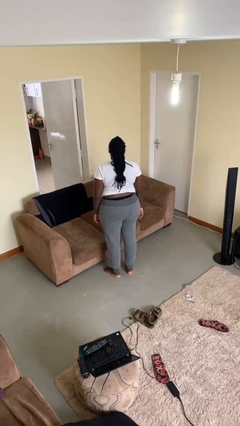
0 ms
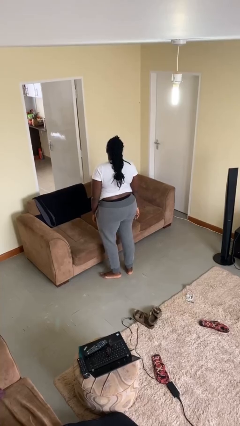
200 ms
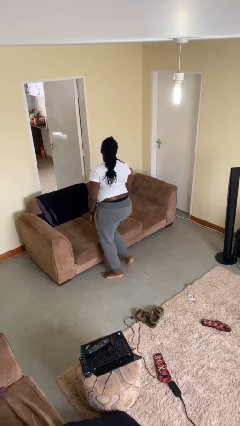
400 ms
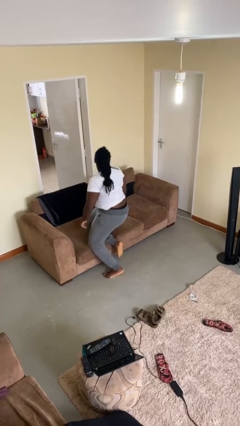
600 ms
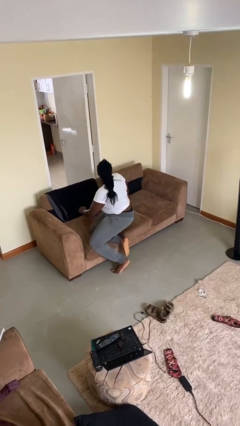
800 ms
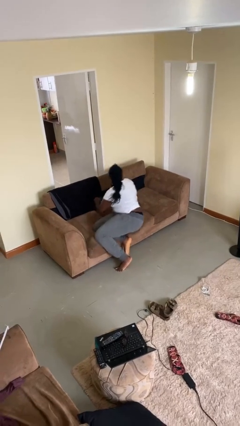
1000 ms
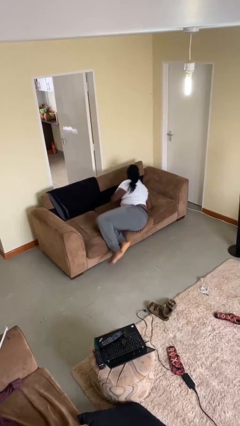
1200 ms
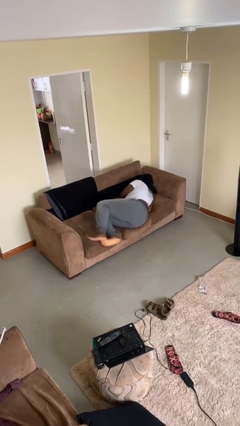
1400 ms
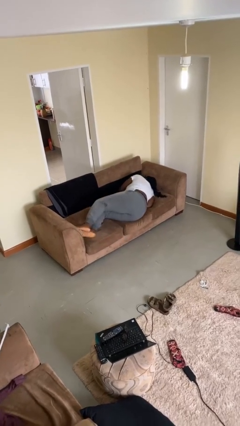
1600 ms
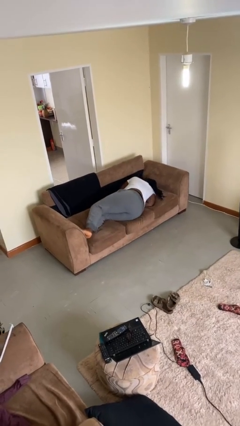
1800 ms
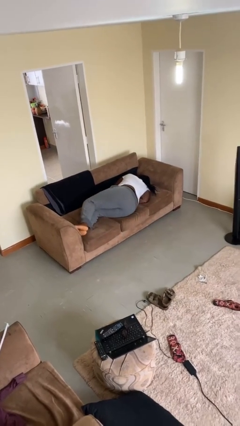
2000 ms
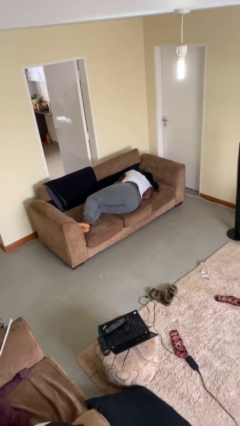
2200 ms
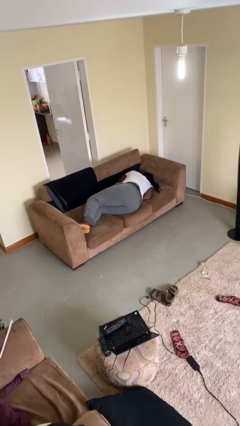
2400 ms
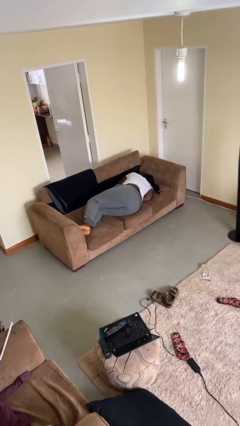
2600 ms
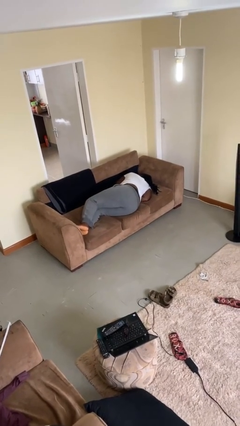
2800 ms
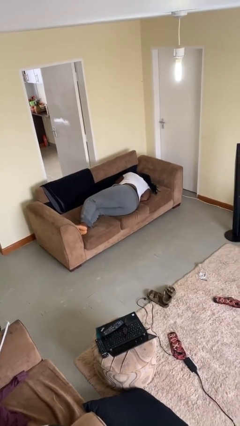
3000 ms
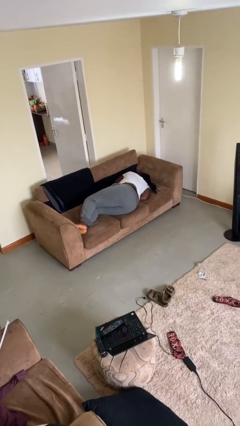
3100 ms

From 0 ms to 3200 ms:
person lies down on couch

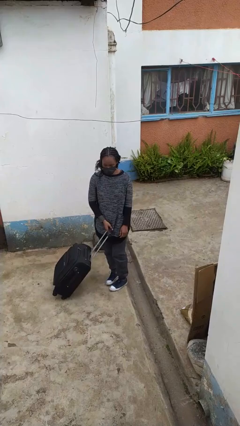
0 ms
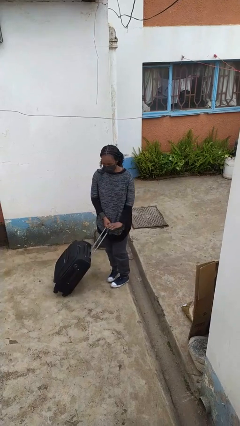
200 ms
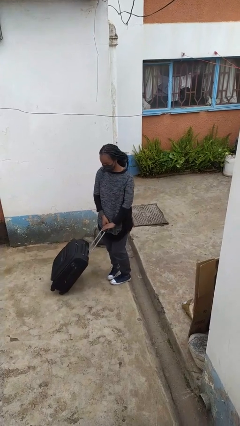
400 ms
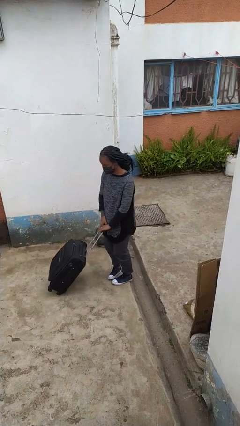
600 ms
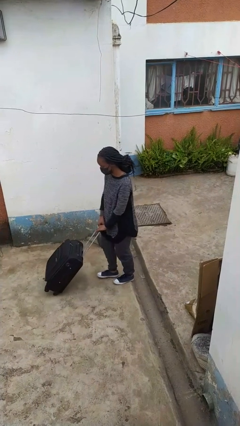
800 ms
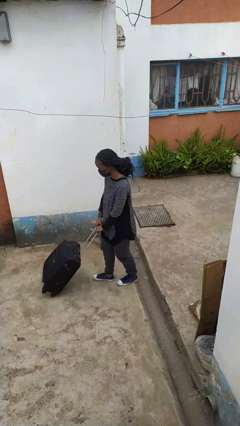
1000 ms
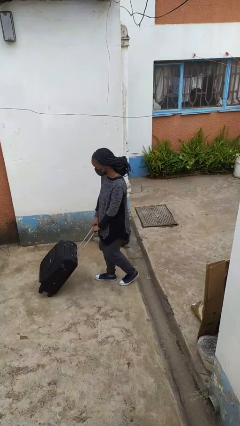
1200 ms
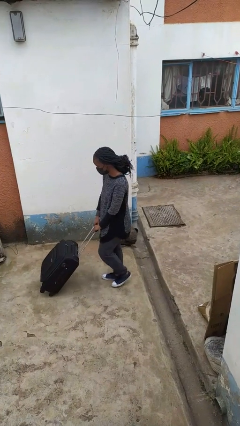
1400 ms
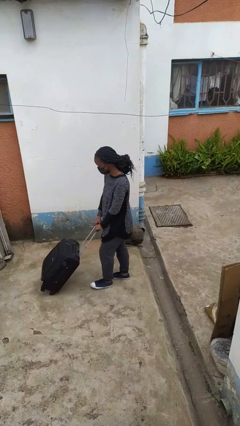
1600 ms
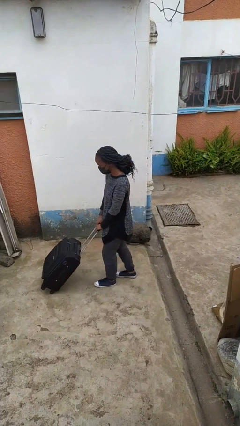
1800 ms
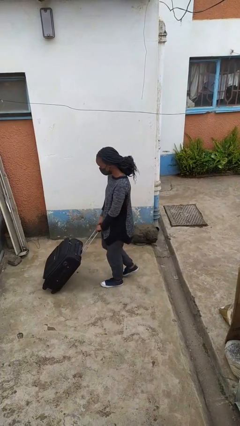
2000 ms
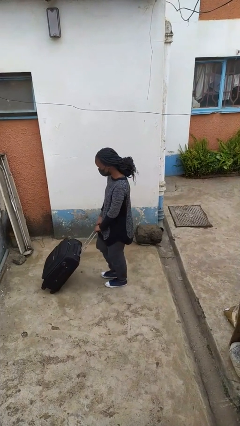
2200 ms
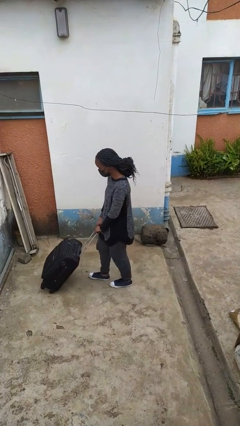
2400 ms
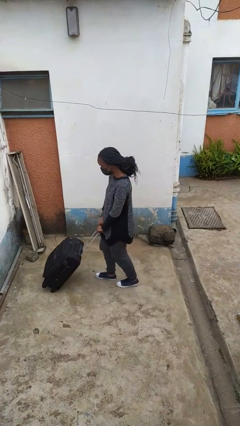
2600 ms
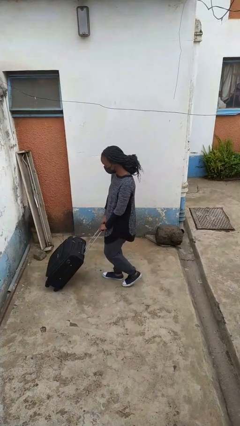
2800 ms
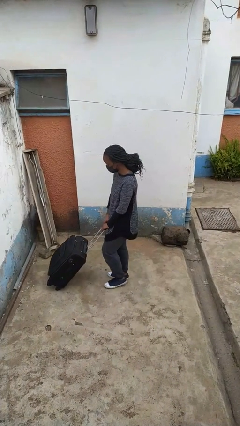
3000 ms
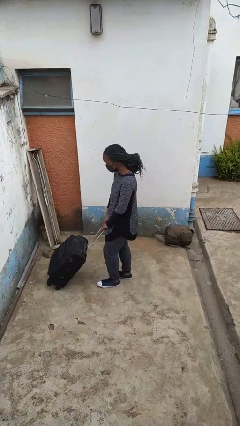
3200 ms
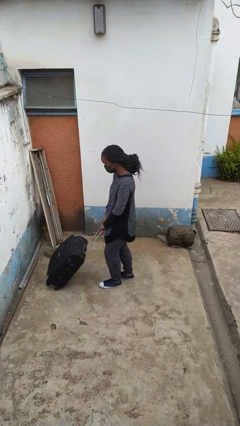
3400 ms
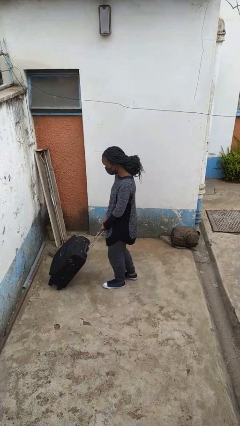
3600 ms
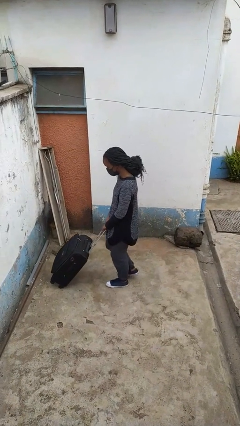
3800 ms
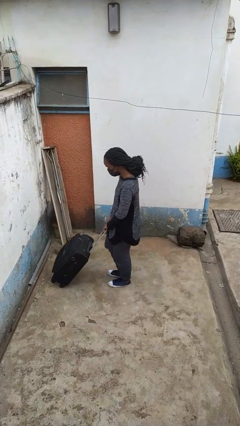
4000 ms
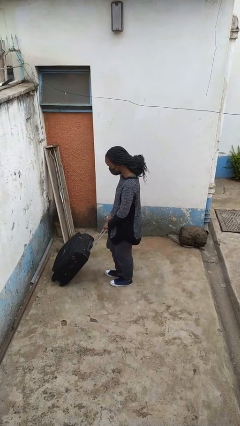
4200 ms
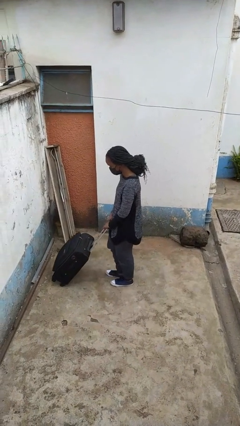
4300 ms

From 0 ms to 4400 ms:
person pushes wheeled cart

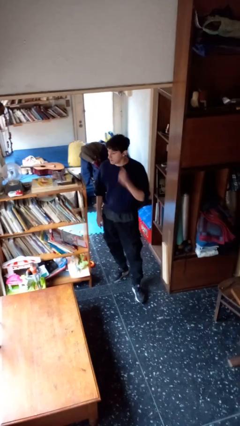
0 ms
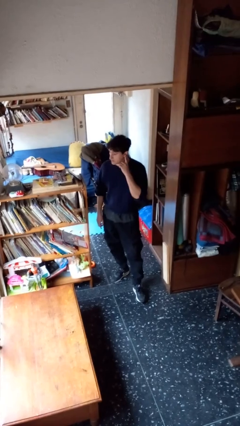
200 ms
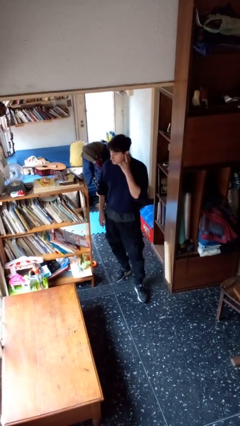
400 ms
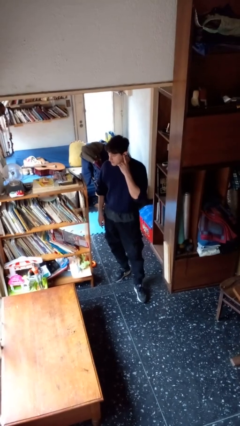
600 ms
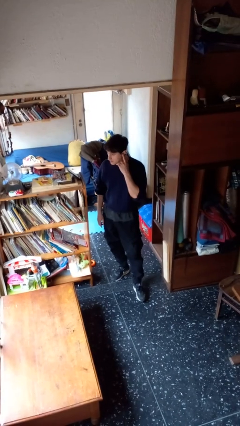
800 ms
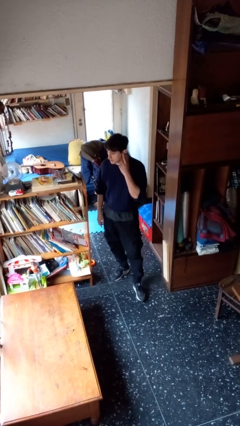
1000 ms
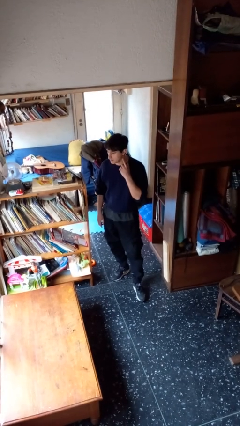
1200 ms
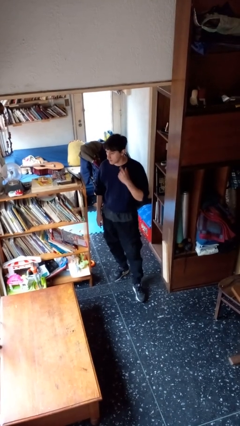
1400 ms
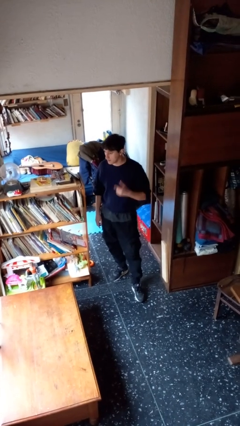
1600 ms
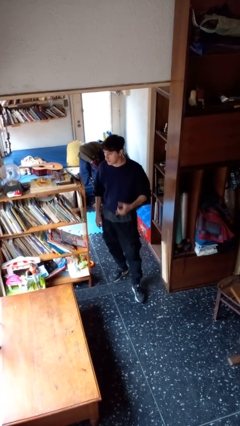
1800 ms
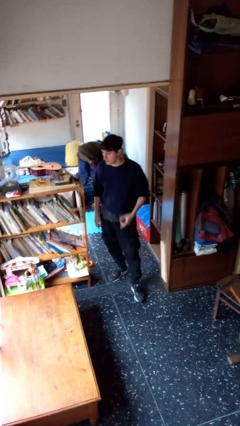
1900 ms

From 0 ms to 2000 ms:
person gestures listen closely

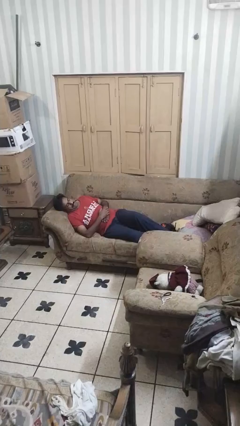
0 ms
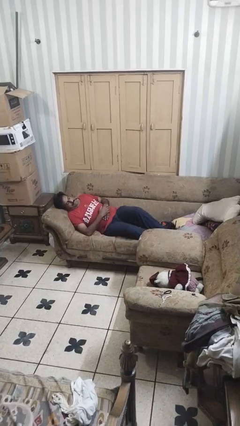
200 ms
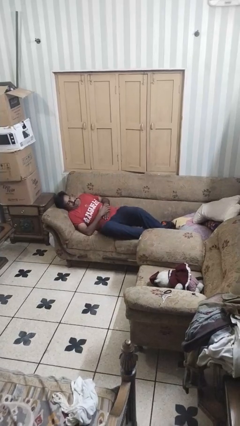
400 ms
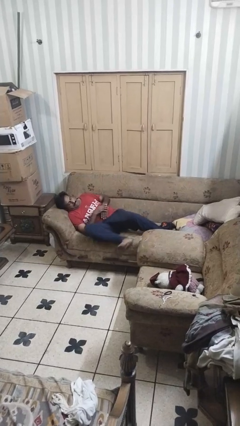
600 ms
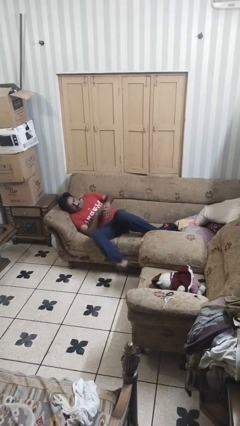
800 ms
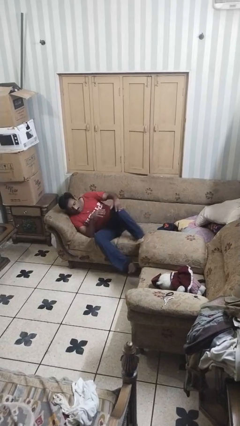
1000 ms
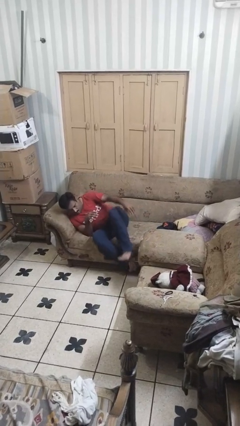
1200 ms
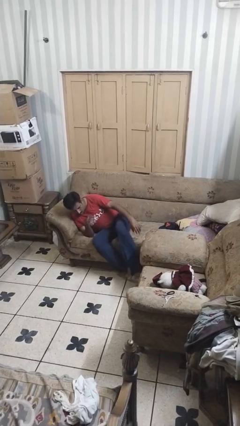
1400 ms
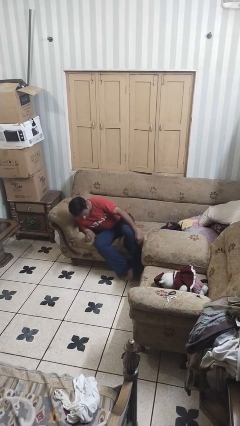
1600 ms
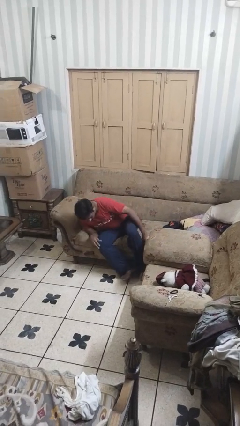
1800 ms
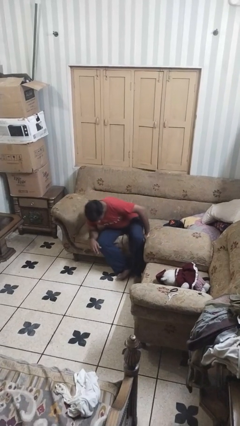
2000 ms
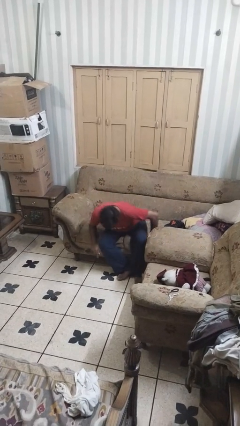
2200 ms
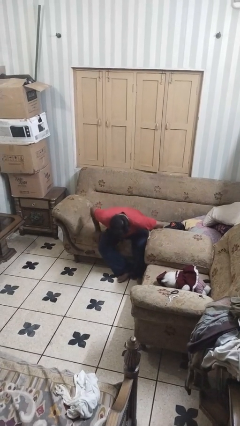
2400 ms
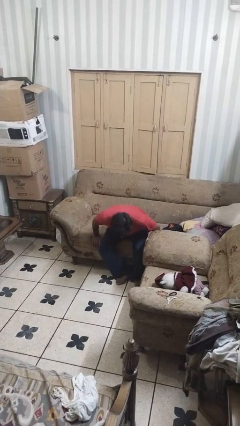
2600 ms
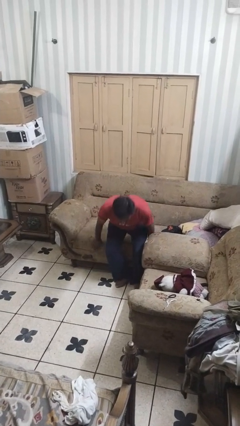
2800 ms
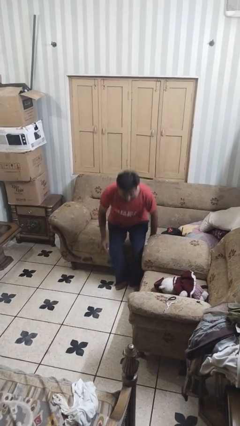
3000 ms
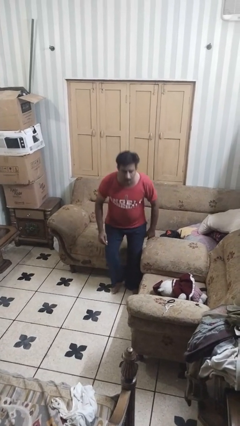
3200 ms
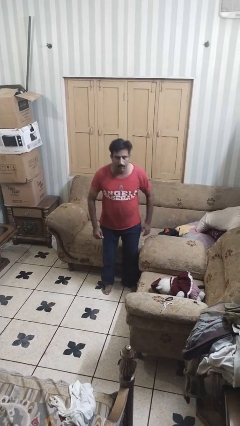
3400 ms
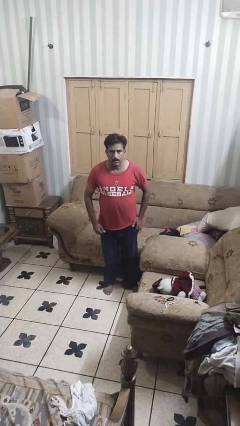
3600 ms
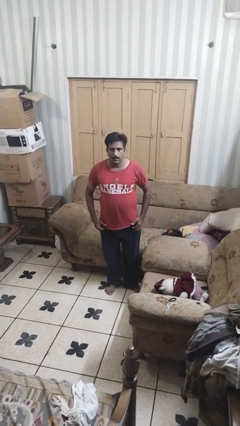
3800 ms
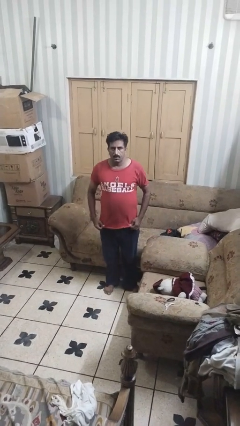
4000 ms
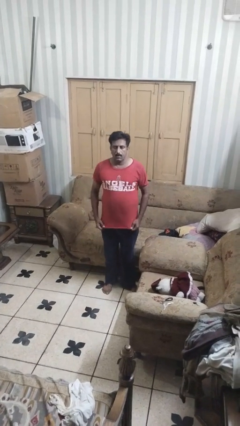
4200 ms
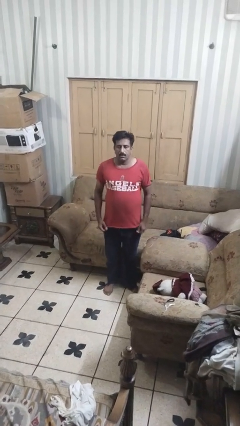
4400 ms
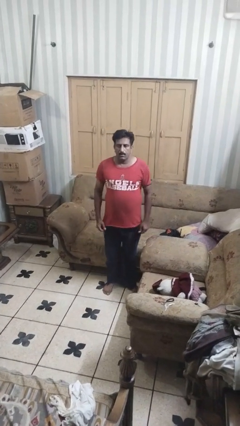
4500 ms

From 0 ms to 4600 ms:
person stands up

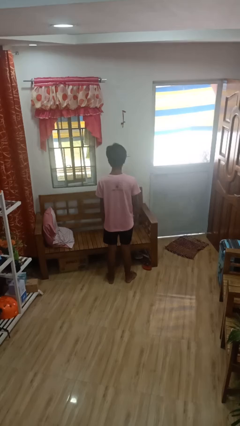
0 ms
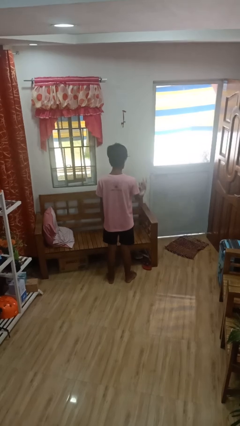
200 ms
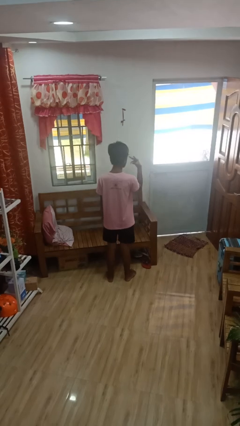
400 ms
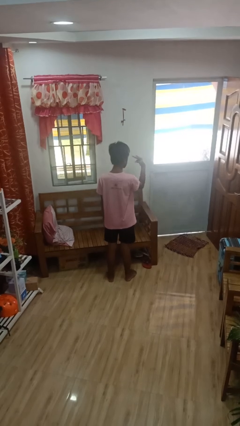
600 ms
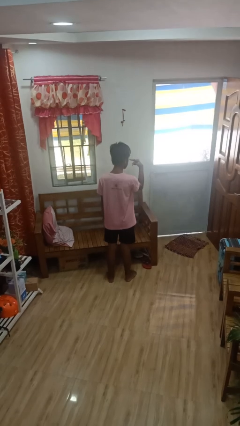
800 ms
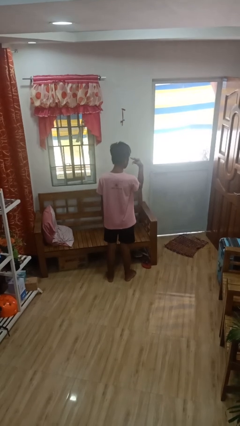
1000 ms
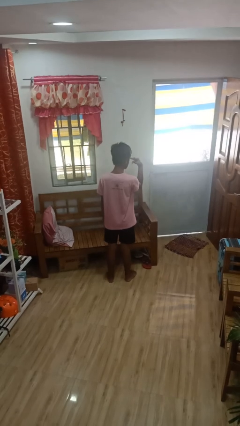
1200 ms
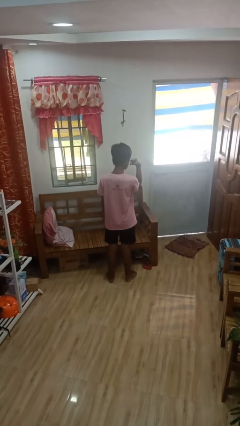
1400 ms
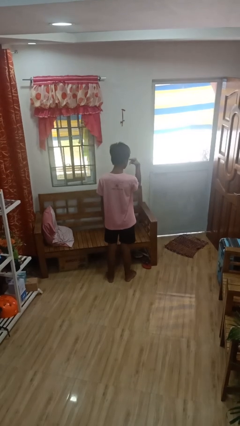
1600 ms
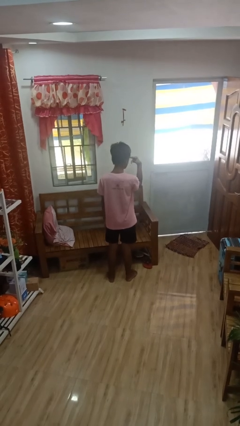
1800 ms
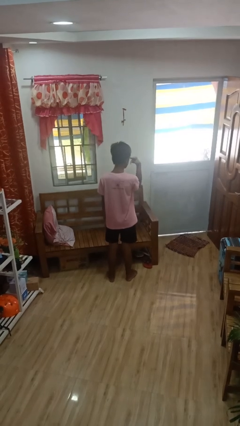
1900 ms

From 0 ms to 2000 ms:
person gestures watch closely

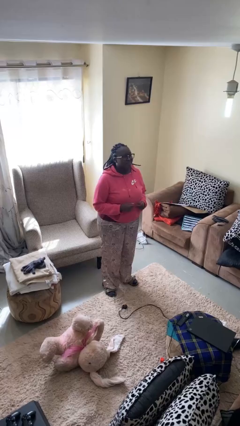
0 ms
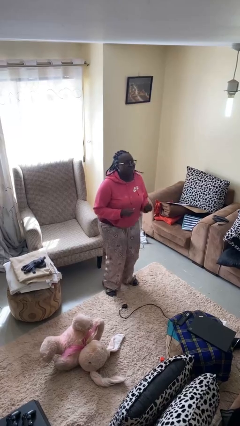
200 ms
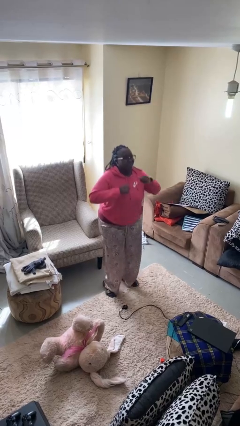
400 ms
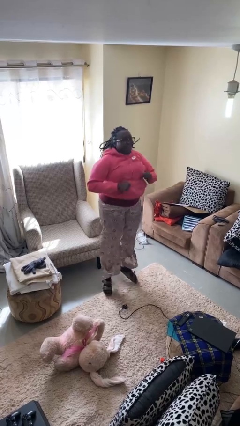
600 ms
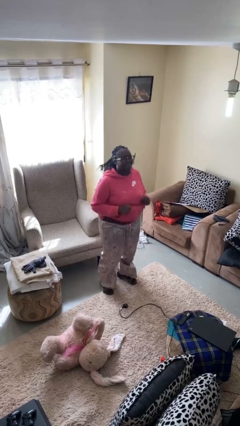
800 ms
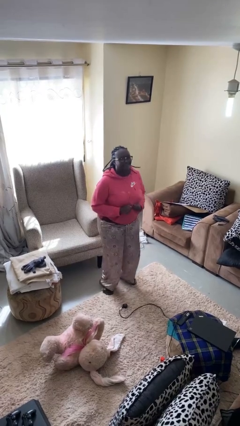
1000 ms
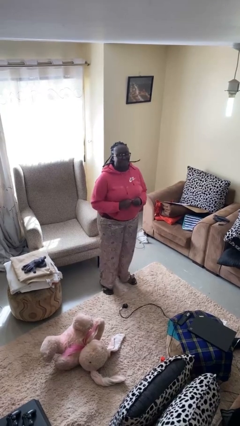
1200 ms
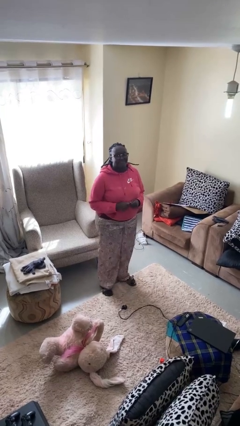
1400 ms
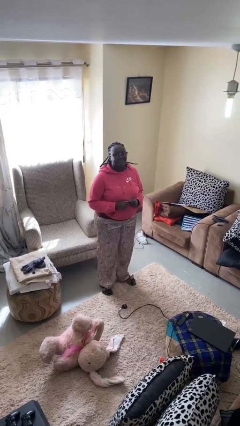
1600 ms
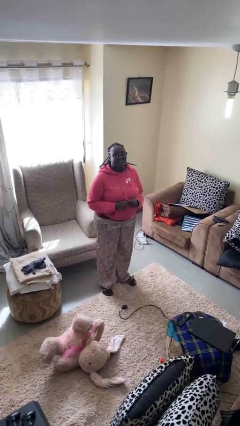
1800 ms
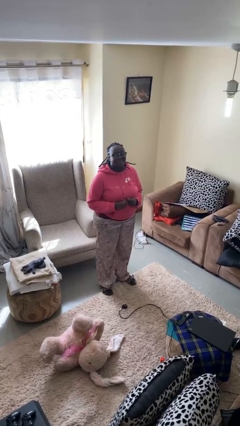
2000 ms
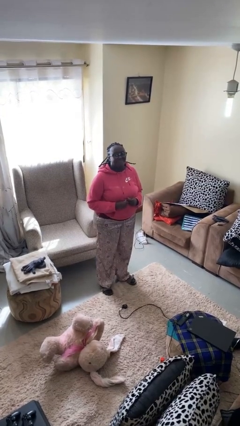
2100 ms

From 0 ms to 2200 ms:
person jumps
